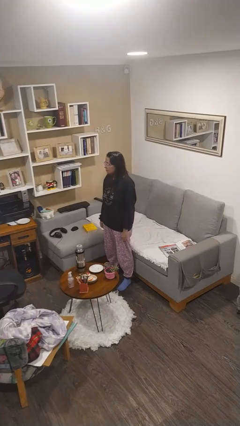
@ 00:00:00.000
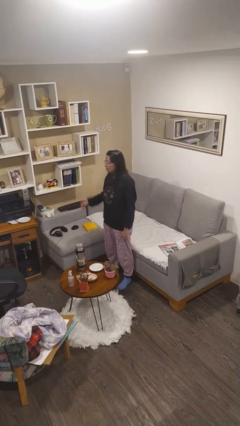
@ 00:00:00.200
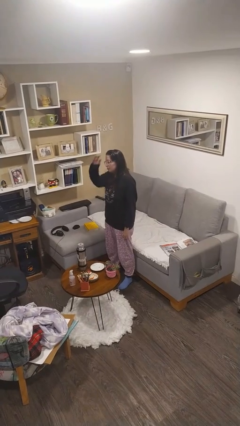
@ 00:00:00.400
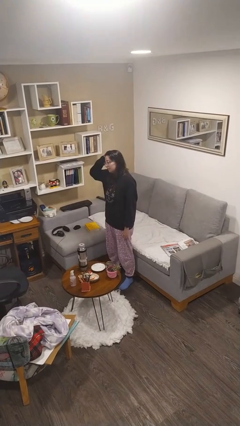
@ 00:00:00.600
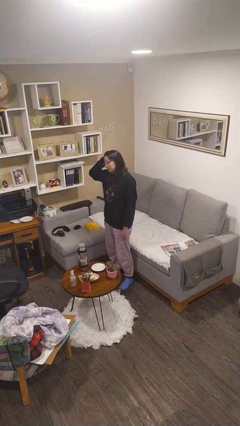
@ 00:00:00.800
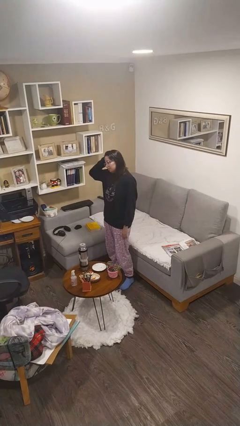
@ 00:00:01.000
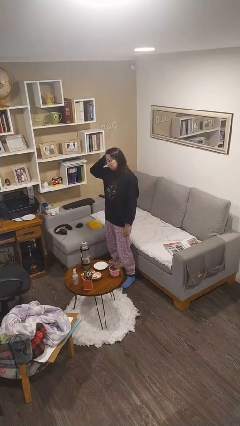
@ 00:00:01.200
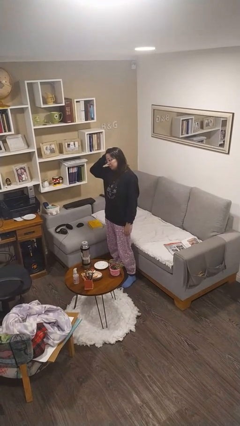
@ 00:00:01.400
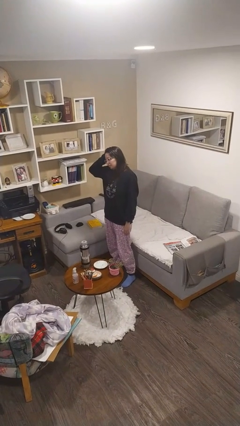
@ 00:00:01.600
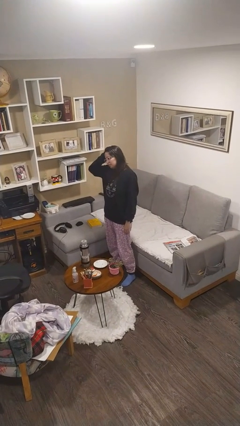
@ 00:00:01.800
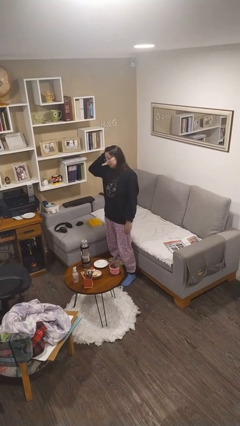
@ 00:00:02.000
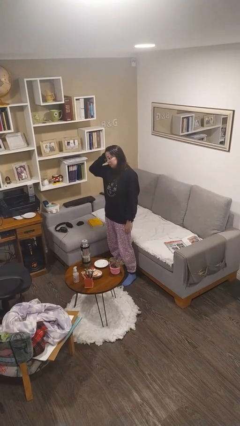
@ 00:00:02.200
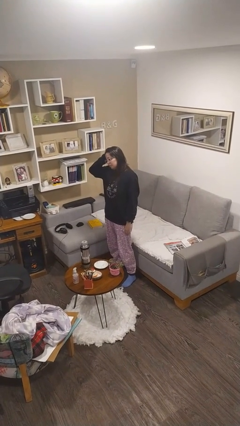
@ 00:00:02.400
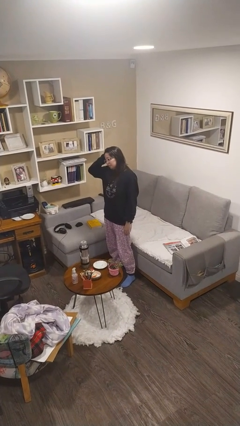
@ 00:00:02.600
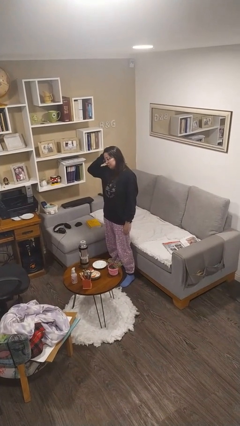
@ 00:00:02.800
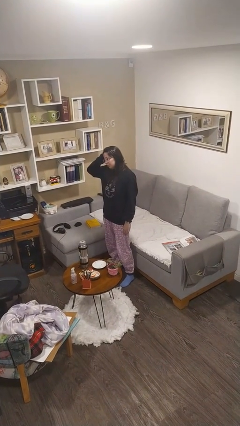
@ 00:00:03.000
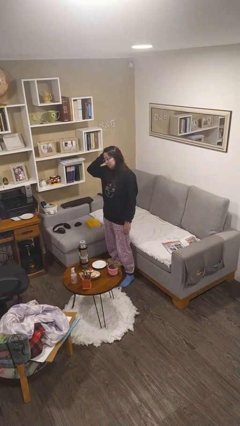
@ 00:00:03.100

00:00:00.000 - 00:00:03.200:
person scratches face

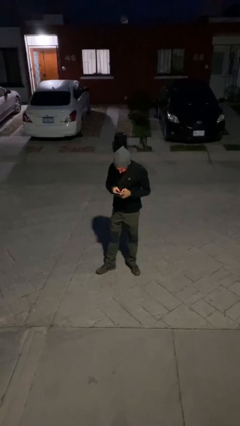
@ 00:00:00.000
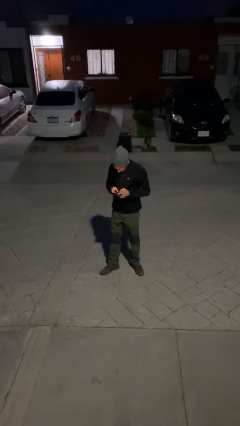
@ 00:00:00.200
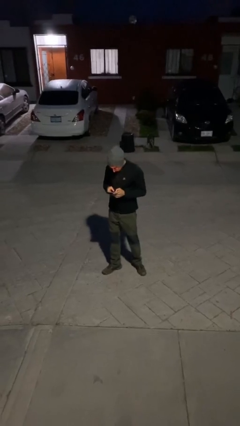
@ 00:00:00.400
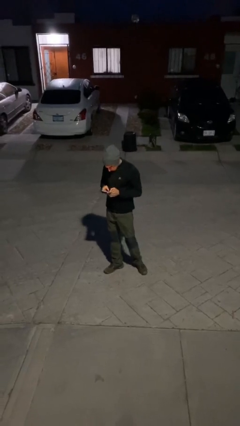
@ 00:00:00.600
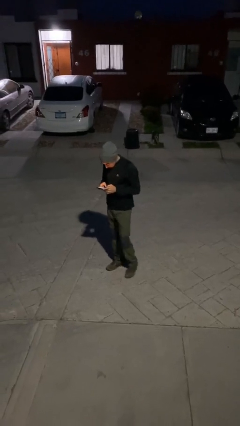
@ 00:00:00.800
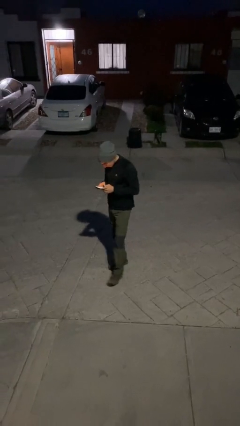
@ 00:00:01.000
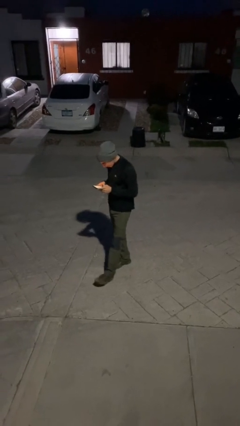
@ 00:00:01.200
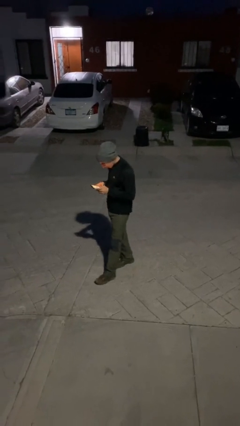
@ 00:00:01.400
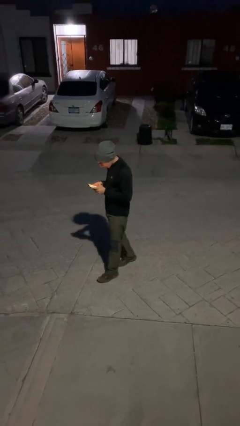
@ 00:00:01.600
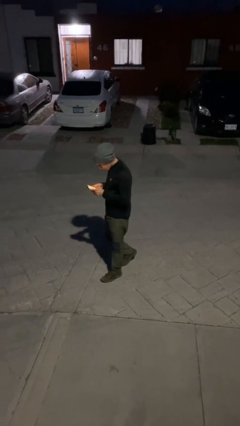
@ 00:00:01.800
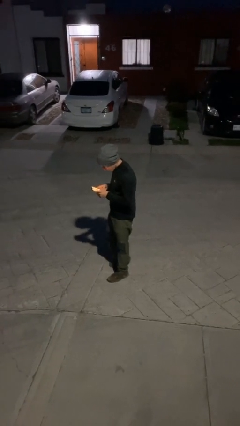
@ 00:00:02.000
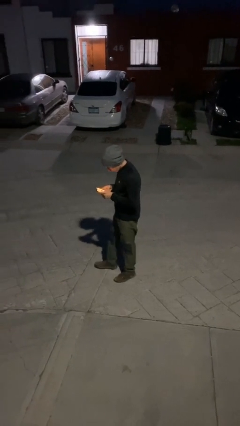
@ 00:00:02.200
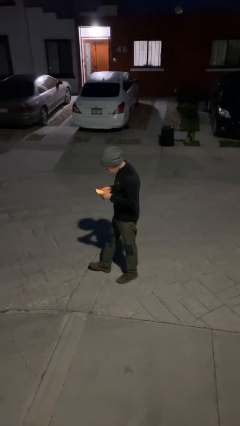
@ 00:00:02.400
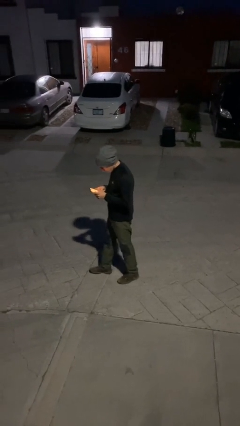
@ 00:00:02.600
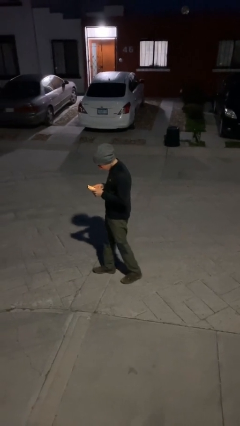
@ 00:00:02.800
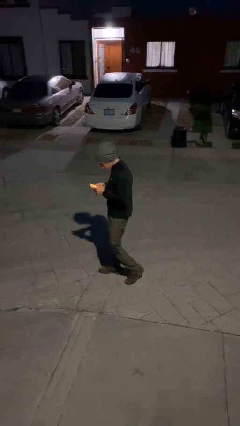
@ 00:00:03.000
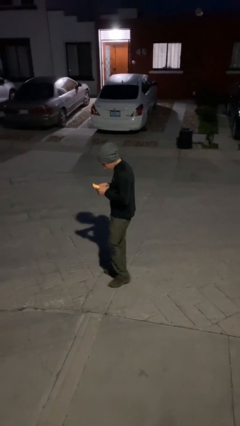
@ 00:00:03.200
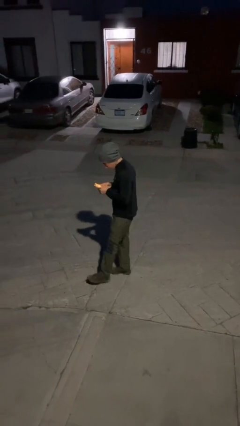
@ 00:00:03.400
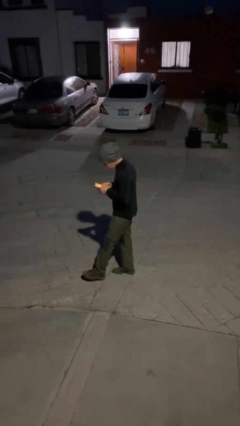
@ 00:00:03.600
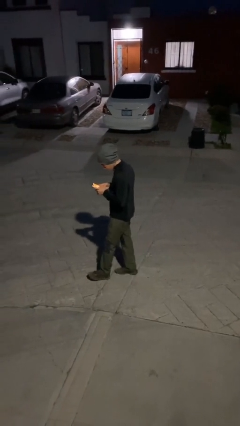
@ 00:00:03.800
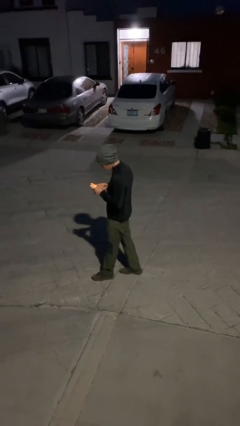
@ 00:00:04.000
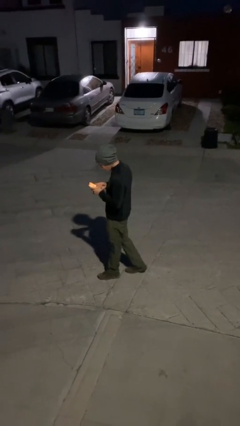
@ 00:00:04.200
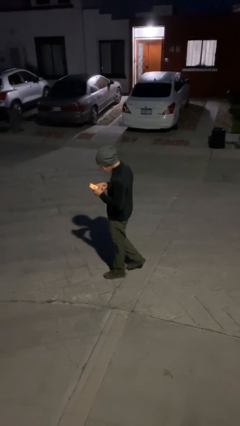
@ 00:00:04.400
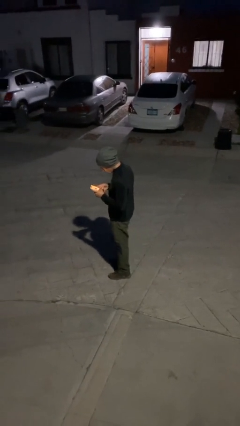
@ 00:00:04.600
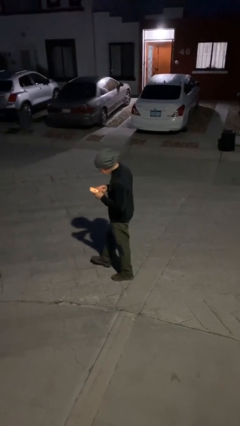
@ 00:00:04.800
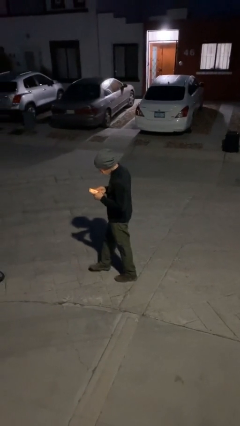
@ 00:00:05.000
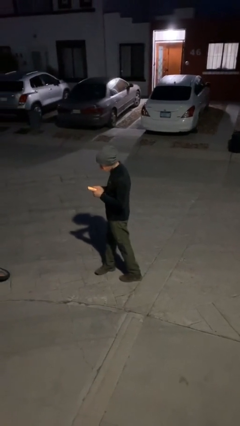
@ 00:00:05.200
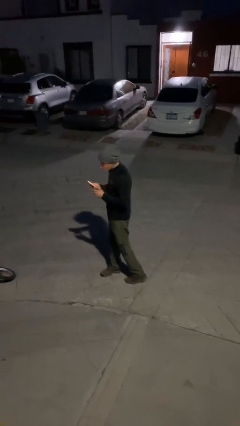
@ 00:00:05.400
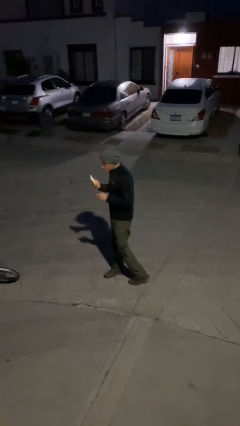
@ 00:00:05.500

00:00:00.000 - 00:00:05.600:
person texts on phone

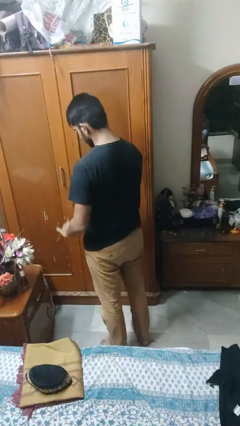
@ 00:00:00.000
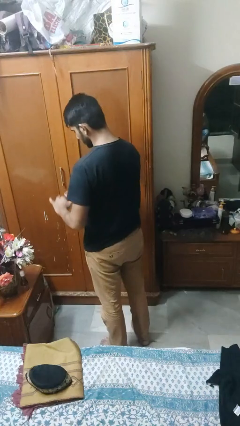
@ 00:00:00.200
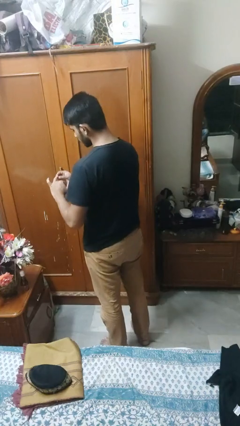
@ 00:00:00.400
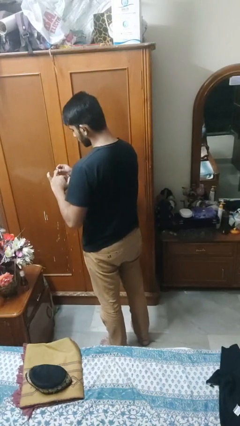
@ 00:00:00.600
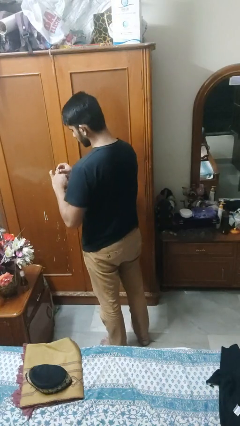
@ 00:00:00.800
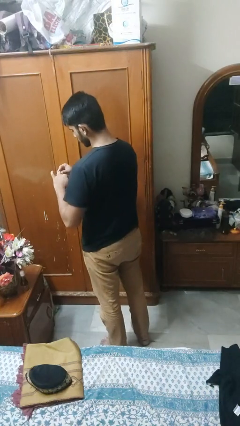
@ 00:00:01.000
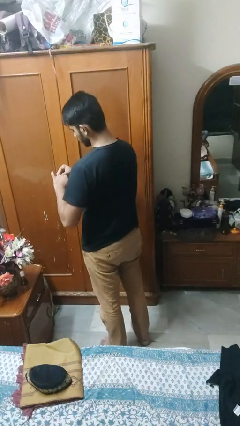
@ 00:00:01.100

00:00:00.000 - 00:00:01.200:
person puts on ring

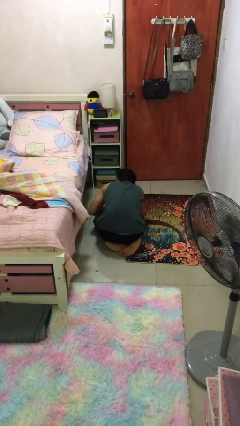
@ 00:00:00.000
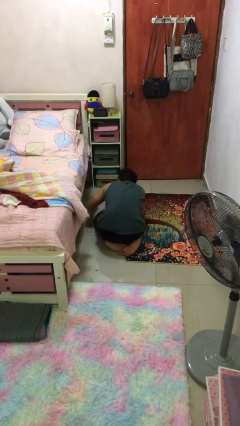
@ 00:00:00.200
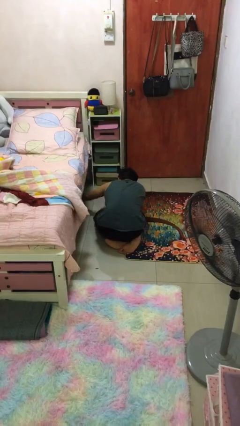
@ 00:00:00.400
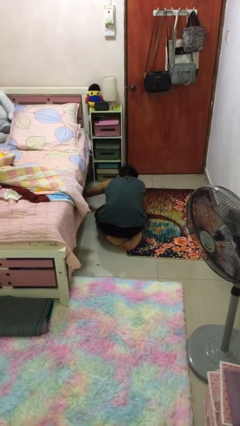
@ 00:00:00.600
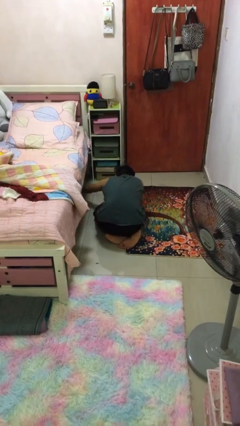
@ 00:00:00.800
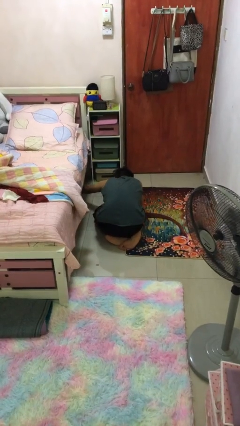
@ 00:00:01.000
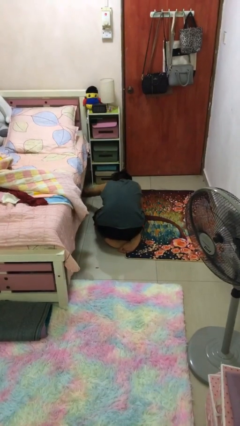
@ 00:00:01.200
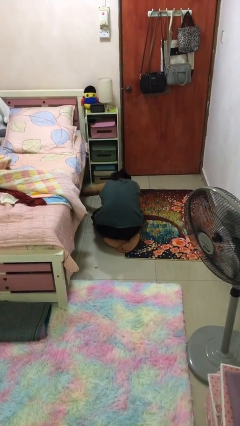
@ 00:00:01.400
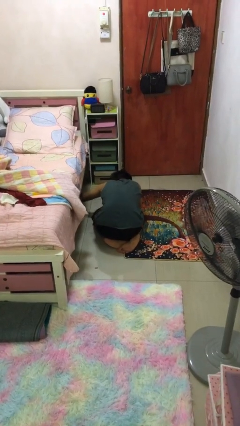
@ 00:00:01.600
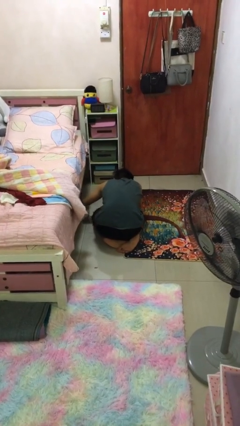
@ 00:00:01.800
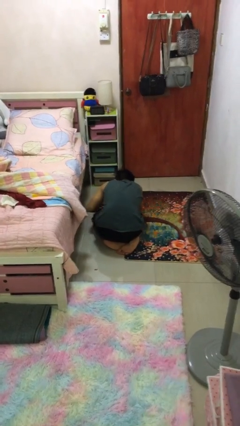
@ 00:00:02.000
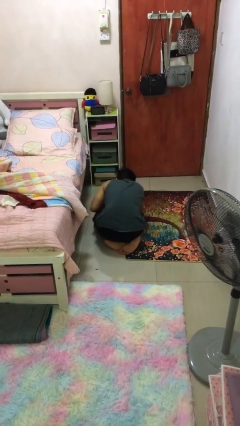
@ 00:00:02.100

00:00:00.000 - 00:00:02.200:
person searches under bed

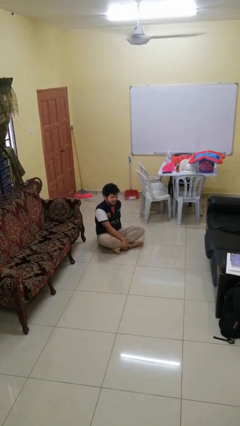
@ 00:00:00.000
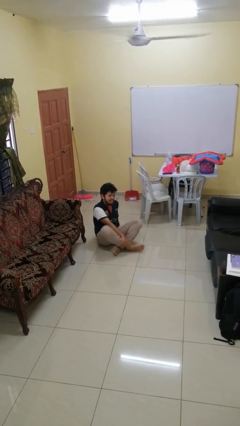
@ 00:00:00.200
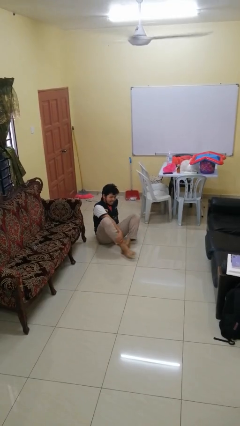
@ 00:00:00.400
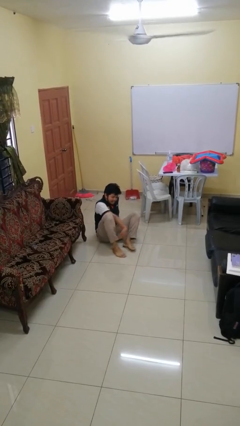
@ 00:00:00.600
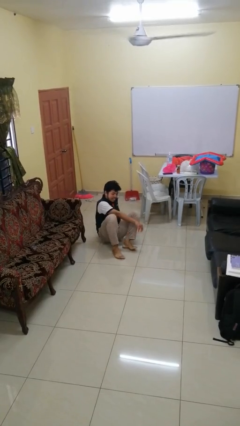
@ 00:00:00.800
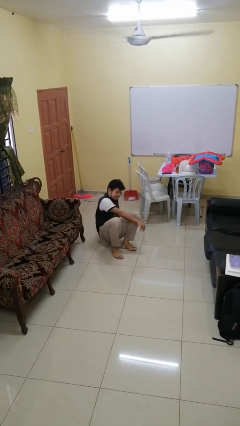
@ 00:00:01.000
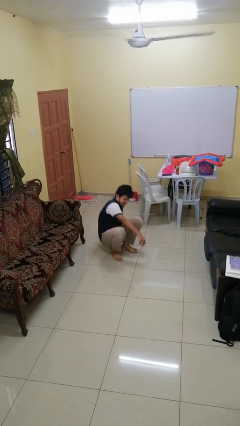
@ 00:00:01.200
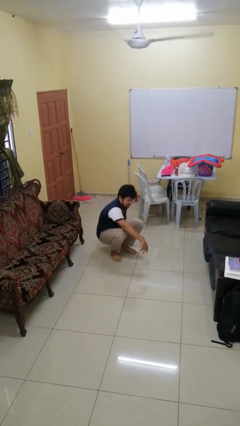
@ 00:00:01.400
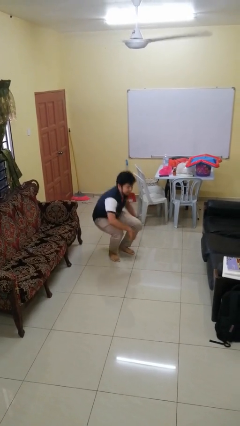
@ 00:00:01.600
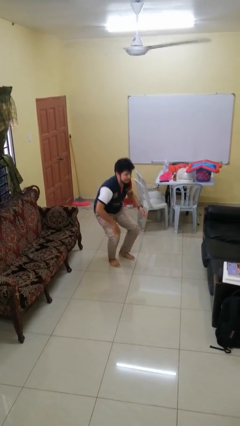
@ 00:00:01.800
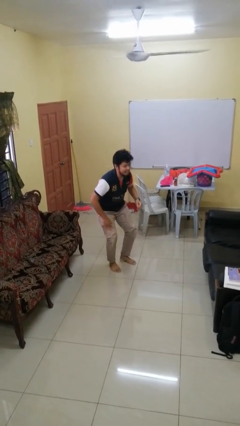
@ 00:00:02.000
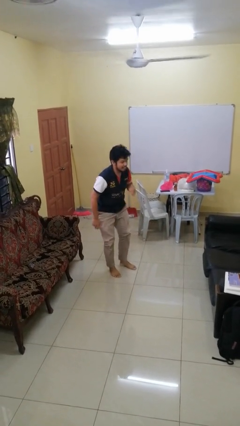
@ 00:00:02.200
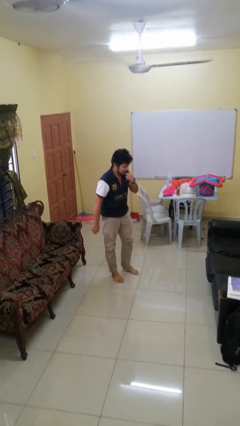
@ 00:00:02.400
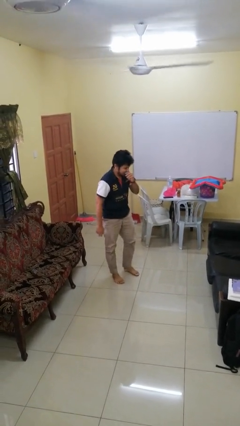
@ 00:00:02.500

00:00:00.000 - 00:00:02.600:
person stands up from floor

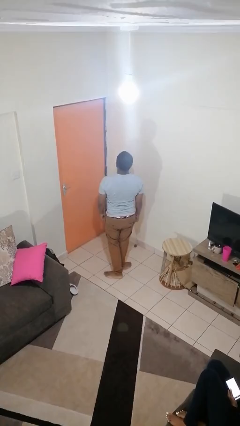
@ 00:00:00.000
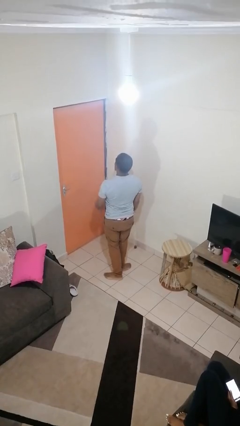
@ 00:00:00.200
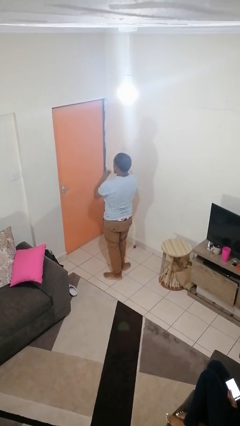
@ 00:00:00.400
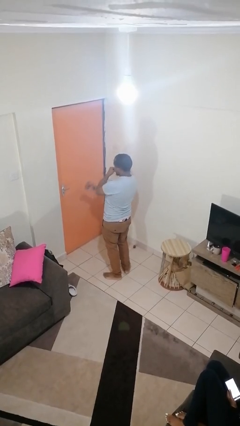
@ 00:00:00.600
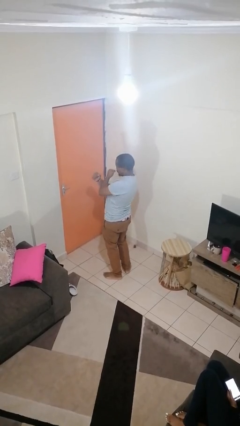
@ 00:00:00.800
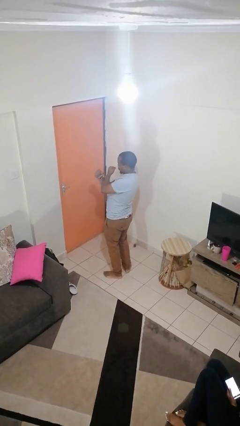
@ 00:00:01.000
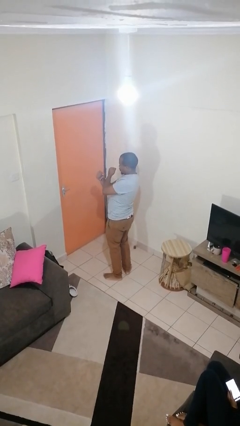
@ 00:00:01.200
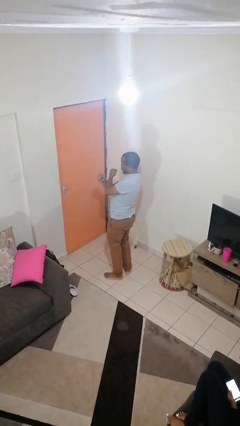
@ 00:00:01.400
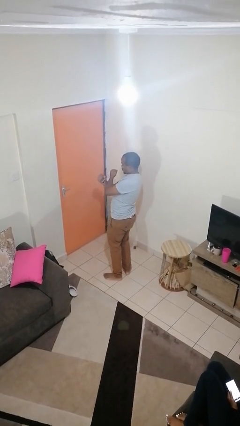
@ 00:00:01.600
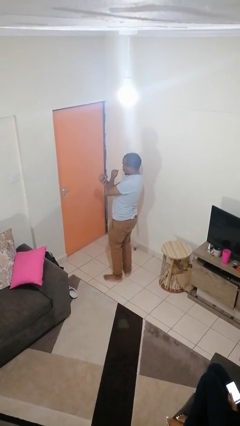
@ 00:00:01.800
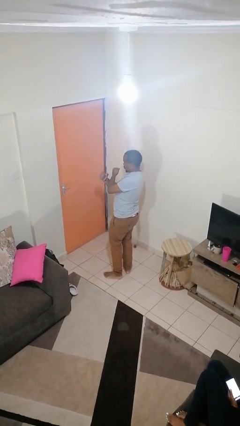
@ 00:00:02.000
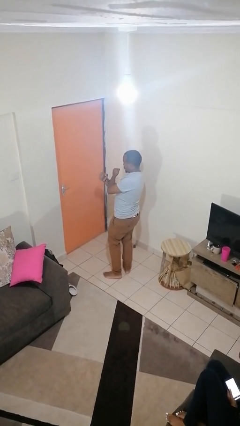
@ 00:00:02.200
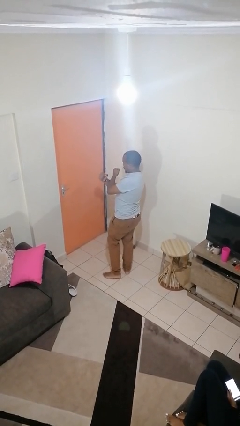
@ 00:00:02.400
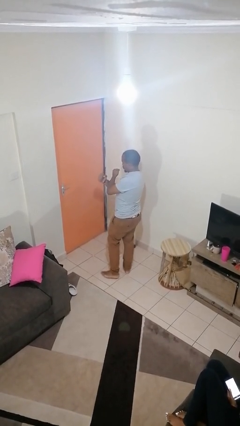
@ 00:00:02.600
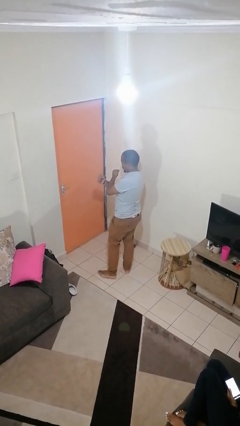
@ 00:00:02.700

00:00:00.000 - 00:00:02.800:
person gestures arms x
